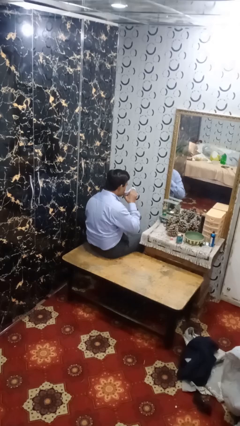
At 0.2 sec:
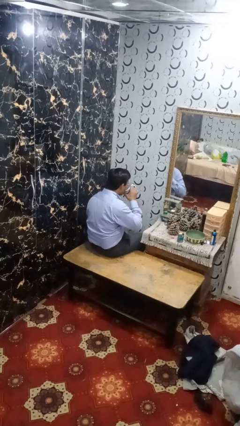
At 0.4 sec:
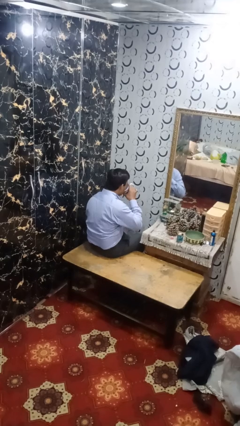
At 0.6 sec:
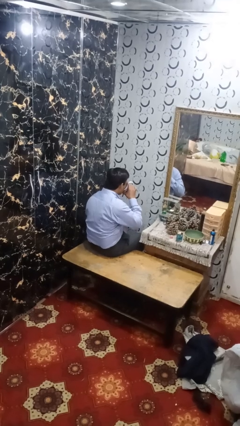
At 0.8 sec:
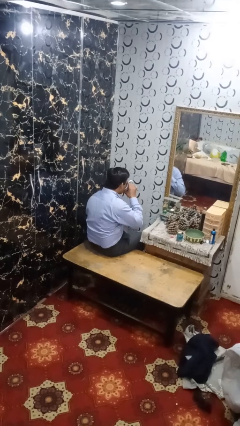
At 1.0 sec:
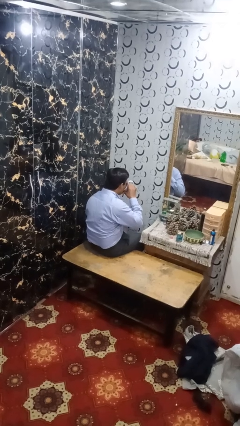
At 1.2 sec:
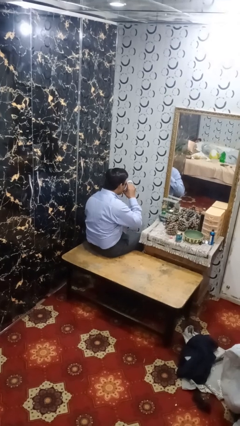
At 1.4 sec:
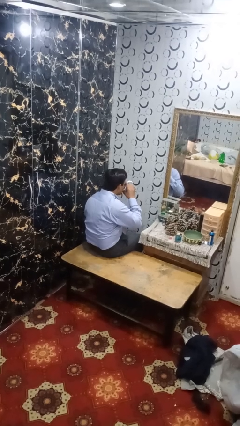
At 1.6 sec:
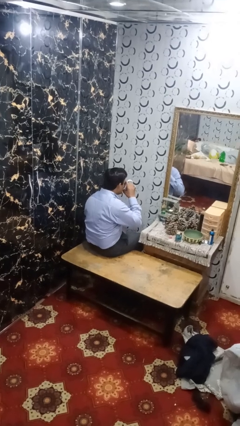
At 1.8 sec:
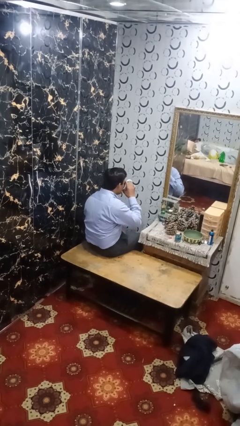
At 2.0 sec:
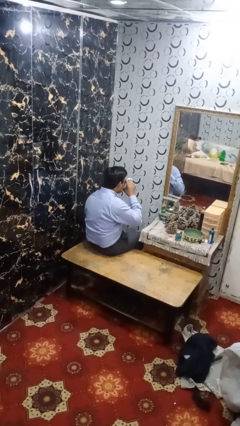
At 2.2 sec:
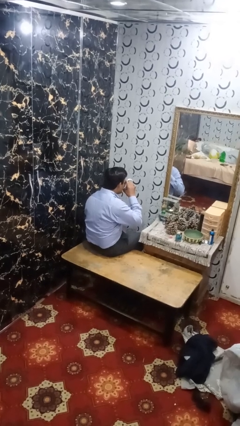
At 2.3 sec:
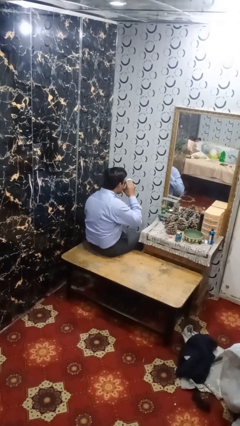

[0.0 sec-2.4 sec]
person drinks from mug

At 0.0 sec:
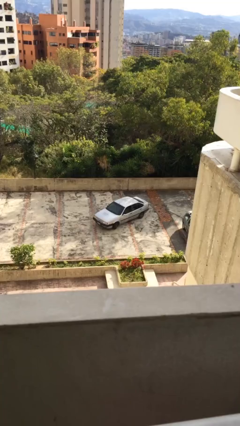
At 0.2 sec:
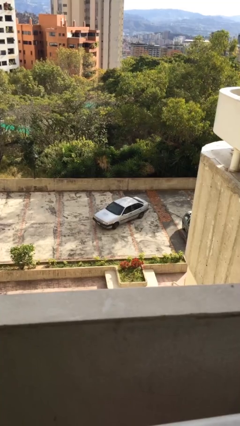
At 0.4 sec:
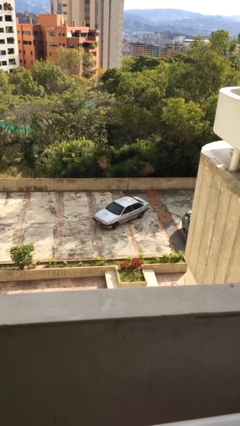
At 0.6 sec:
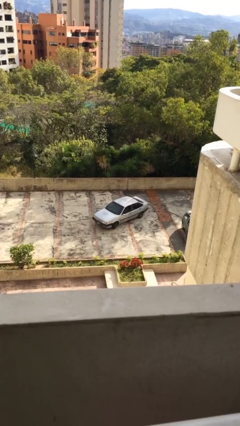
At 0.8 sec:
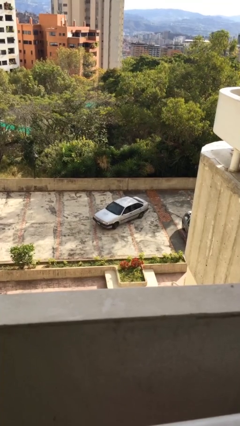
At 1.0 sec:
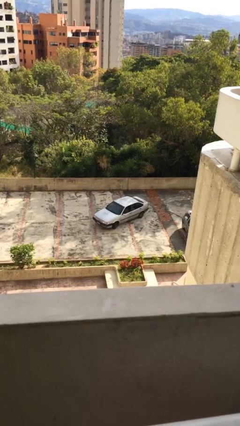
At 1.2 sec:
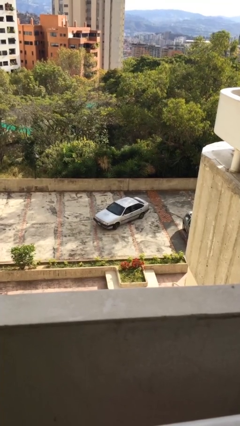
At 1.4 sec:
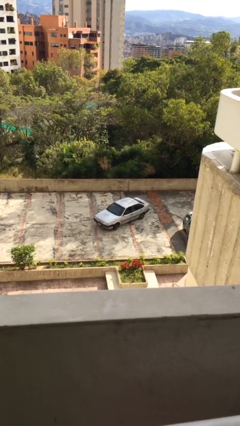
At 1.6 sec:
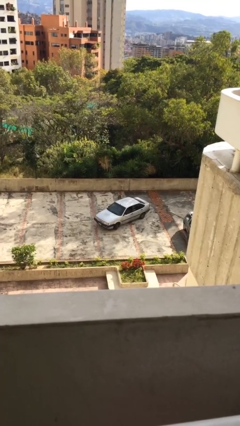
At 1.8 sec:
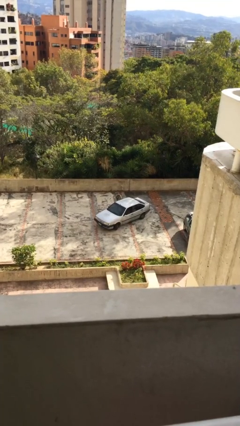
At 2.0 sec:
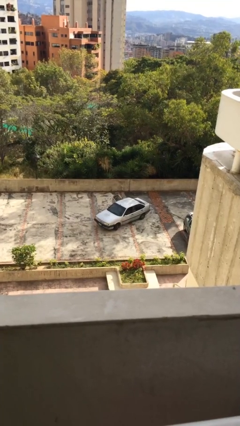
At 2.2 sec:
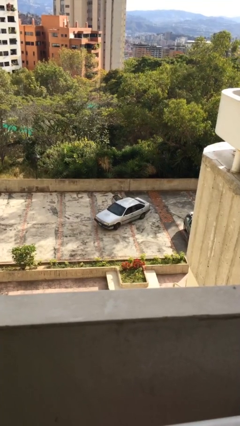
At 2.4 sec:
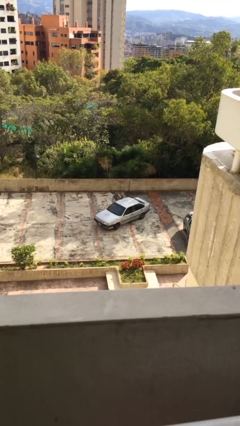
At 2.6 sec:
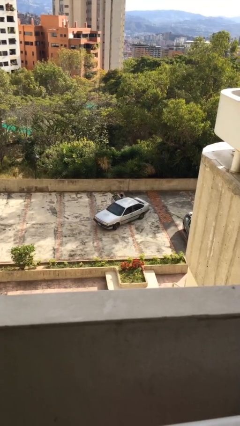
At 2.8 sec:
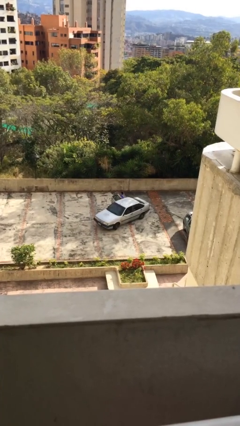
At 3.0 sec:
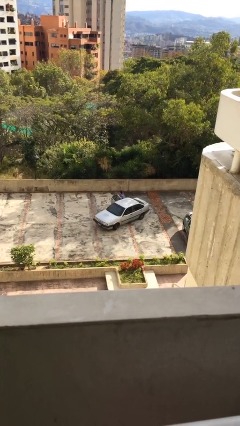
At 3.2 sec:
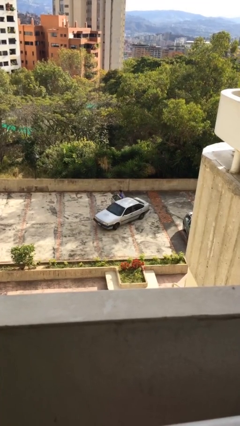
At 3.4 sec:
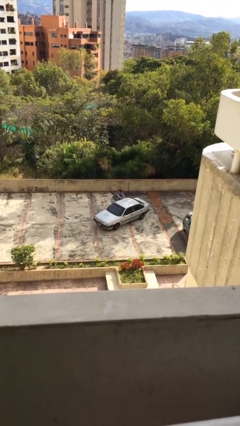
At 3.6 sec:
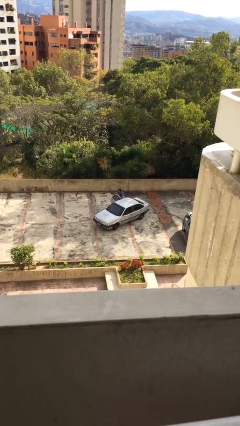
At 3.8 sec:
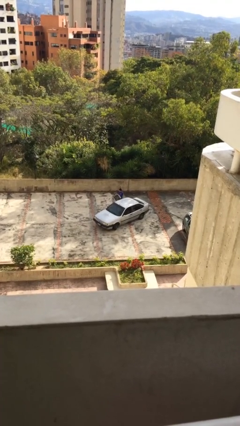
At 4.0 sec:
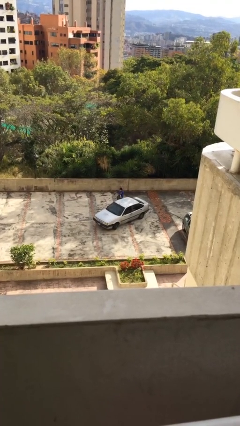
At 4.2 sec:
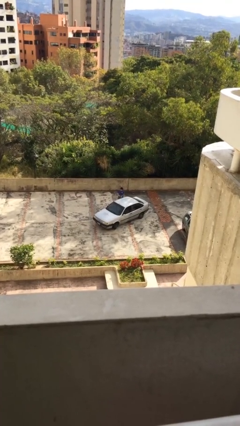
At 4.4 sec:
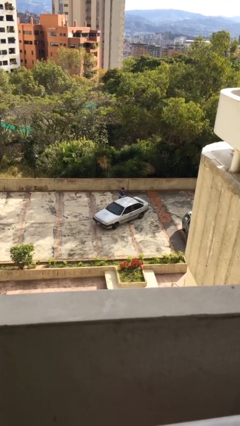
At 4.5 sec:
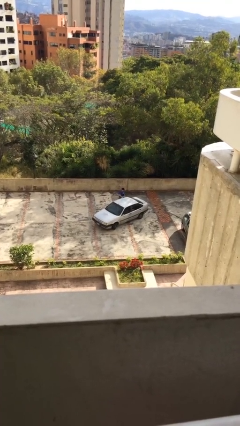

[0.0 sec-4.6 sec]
car drops off person

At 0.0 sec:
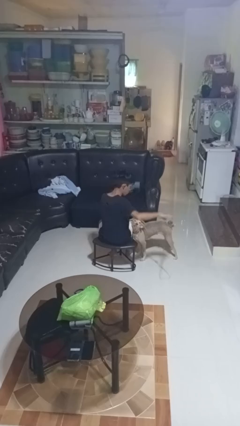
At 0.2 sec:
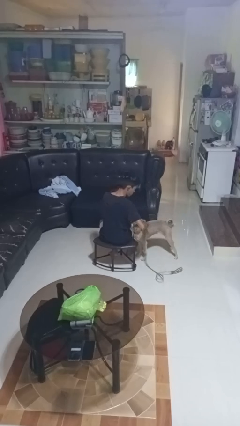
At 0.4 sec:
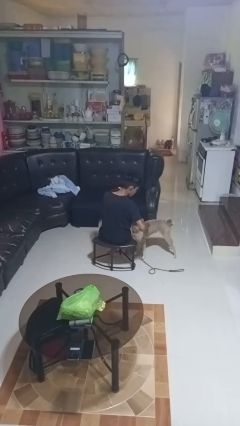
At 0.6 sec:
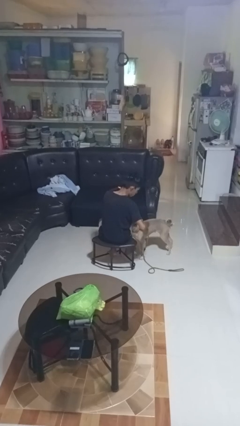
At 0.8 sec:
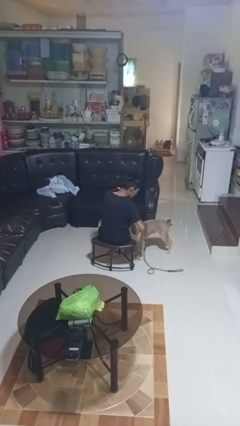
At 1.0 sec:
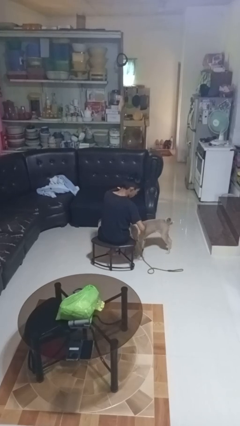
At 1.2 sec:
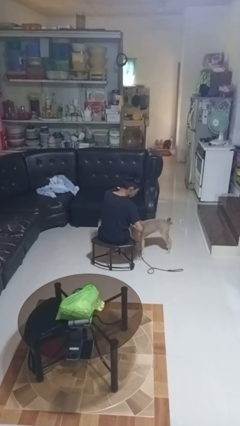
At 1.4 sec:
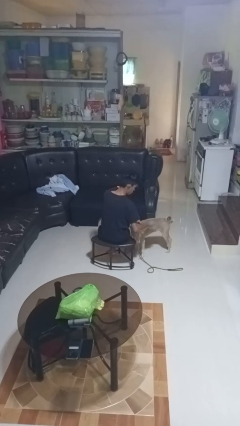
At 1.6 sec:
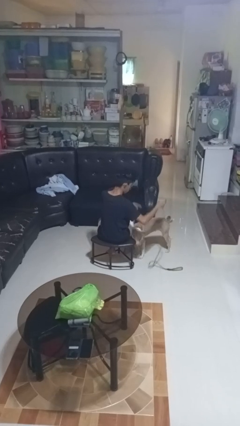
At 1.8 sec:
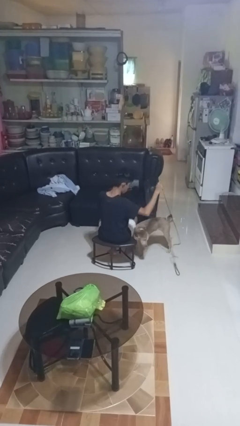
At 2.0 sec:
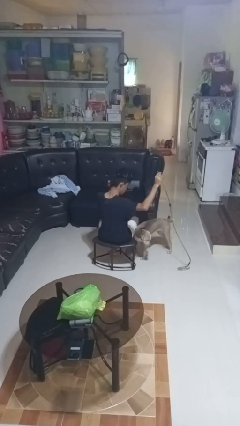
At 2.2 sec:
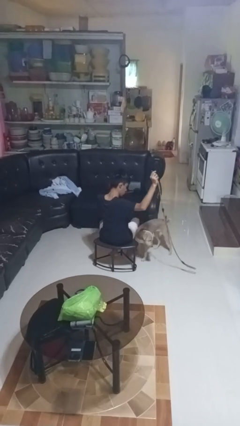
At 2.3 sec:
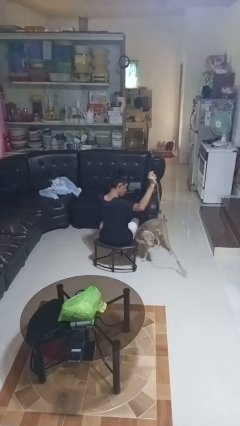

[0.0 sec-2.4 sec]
person unattaches leash from dog

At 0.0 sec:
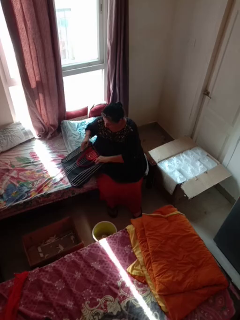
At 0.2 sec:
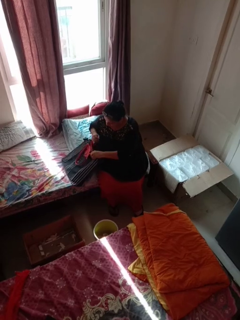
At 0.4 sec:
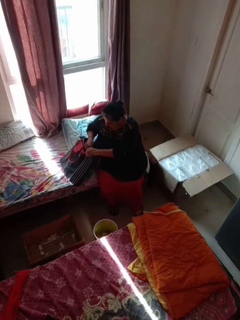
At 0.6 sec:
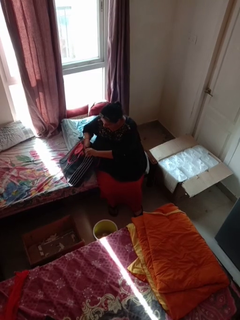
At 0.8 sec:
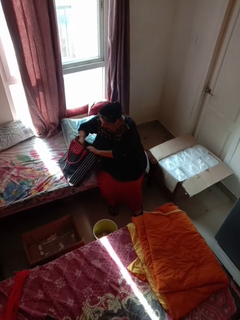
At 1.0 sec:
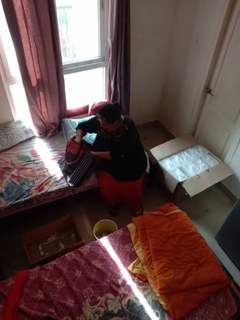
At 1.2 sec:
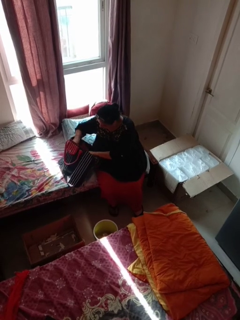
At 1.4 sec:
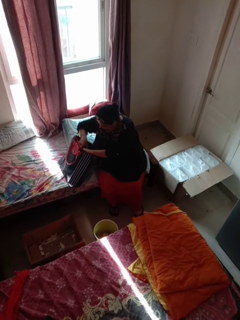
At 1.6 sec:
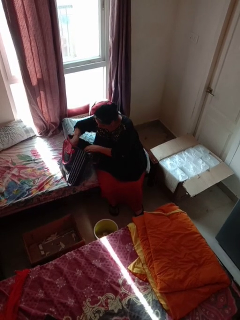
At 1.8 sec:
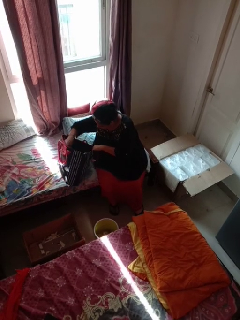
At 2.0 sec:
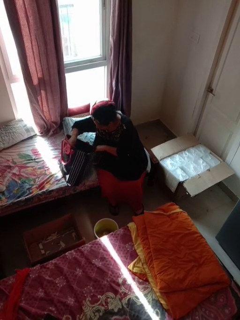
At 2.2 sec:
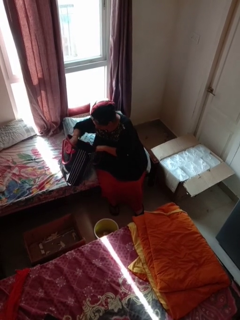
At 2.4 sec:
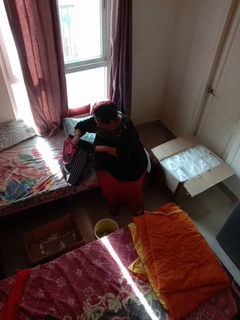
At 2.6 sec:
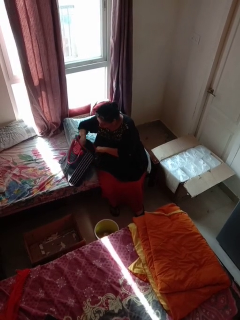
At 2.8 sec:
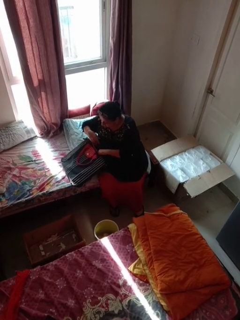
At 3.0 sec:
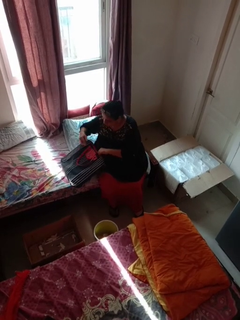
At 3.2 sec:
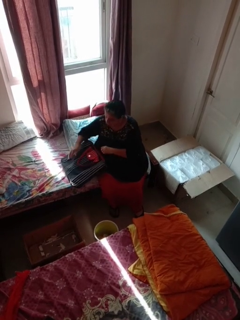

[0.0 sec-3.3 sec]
person searches in bag

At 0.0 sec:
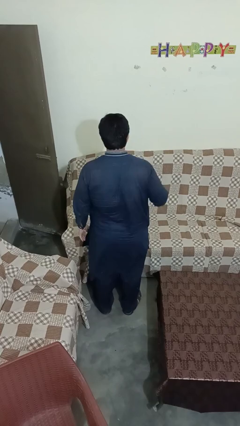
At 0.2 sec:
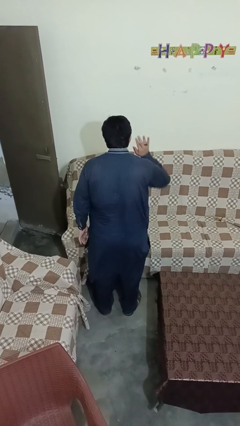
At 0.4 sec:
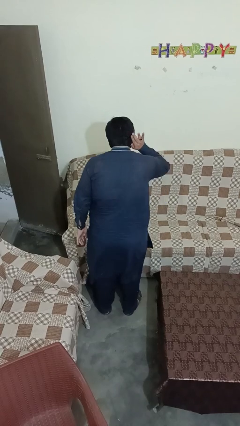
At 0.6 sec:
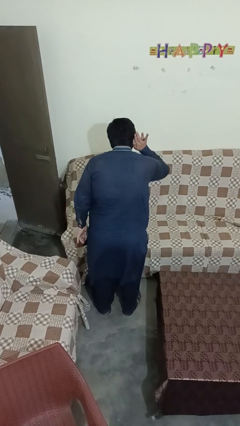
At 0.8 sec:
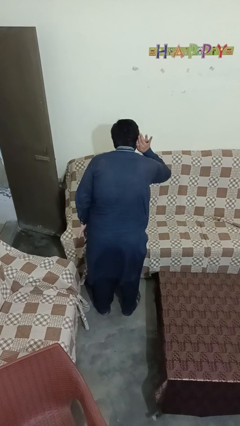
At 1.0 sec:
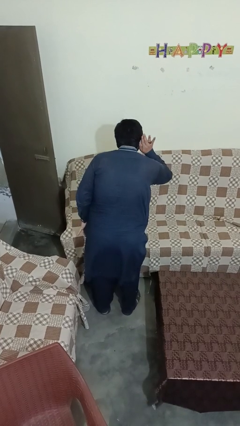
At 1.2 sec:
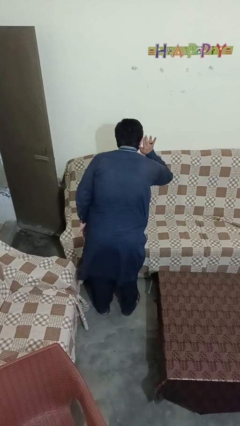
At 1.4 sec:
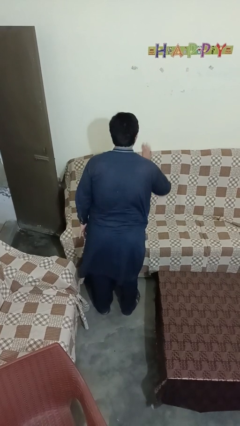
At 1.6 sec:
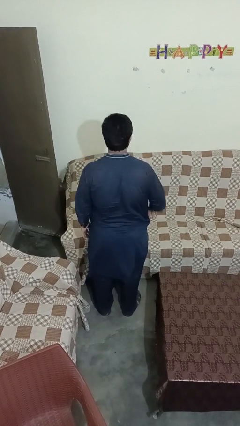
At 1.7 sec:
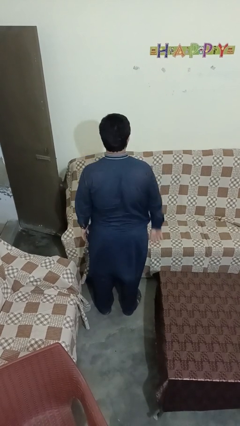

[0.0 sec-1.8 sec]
person gestures listen closely

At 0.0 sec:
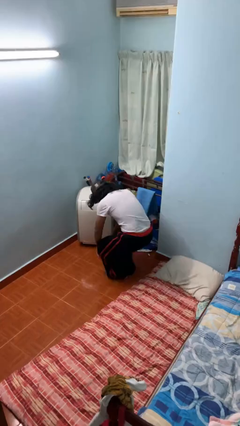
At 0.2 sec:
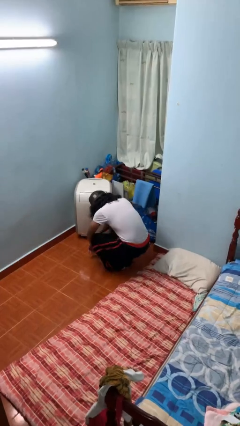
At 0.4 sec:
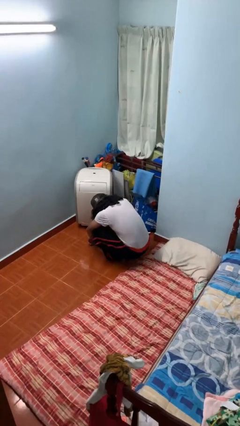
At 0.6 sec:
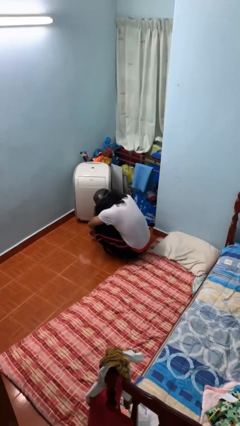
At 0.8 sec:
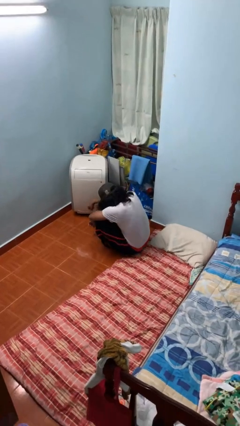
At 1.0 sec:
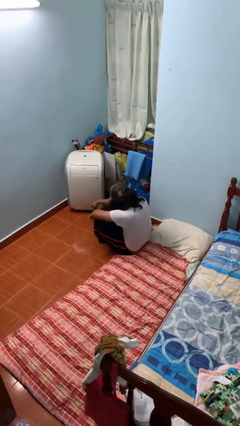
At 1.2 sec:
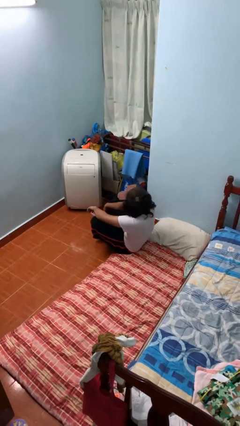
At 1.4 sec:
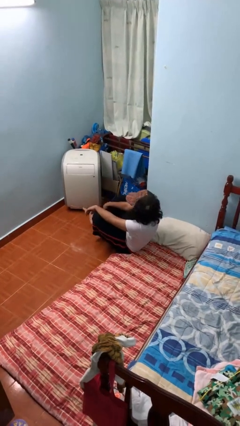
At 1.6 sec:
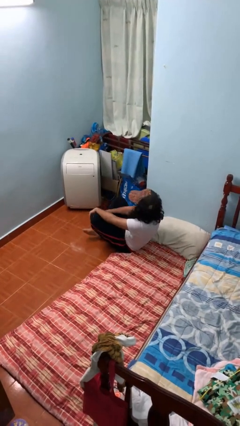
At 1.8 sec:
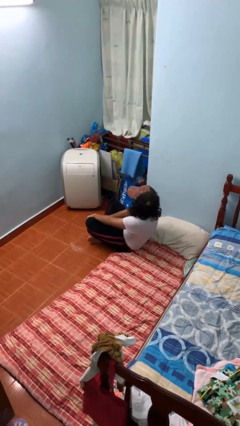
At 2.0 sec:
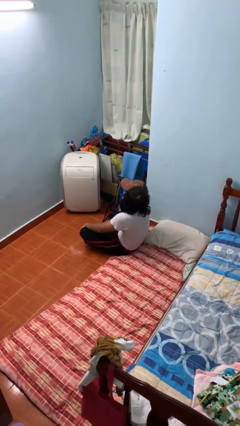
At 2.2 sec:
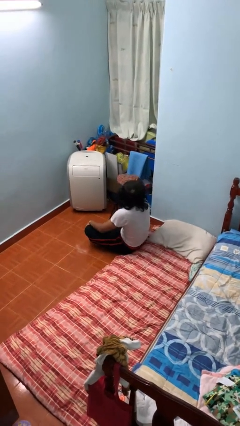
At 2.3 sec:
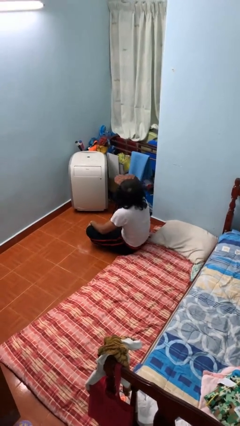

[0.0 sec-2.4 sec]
person sits crisscross

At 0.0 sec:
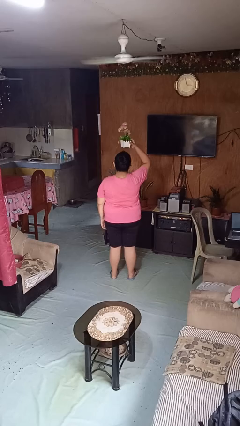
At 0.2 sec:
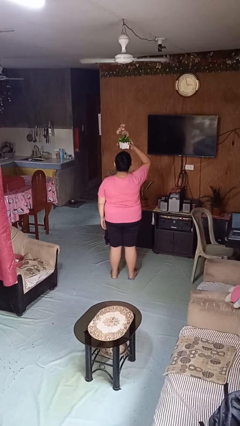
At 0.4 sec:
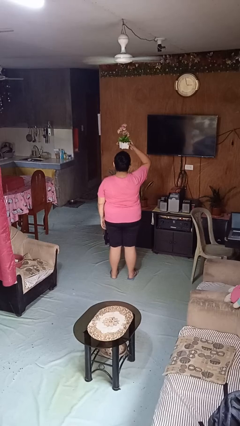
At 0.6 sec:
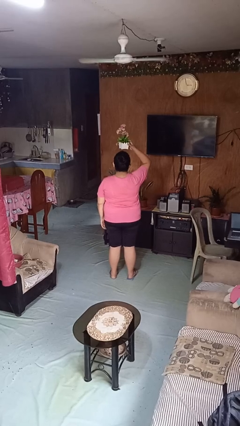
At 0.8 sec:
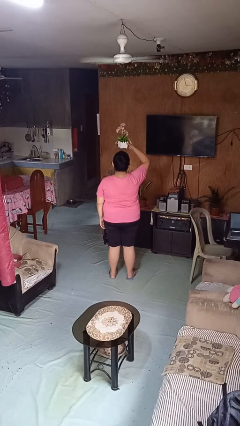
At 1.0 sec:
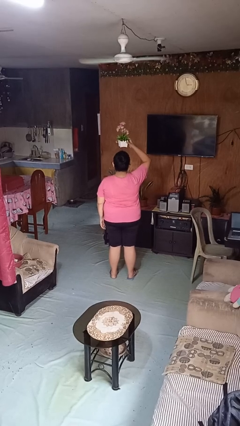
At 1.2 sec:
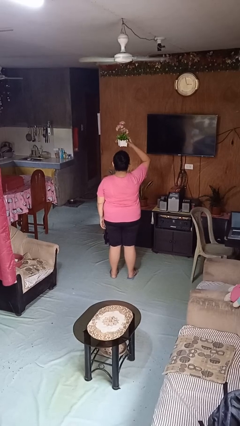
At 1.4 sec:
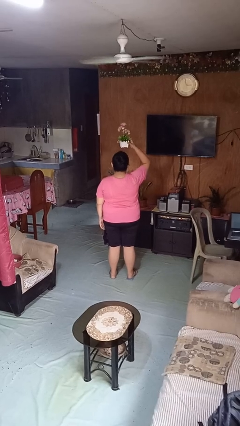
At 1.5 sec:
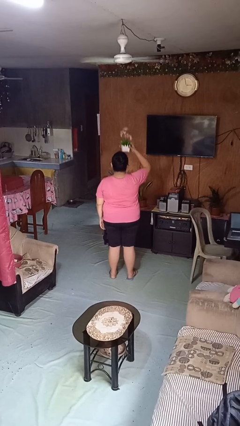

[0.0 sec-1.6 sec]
person holds object above head
